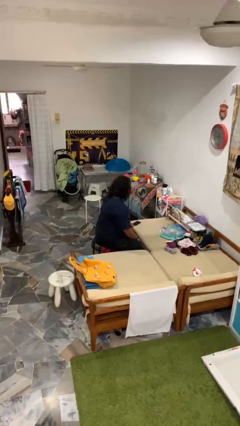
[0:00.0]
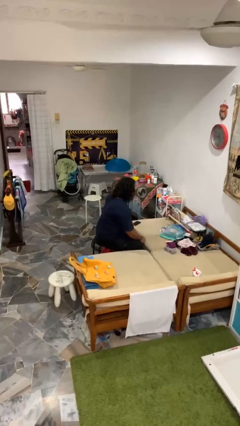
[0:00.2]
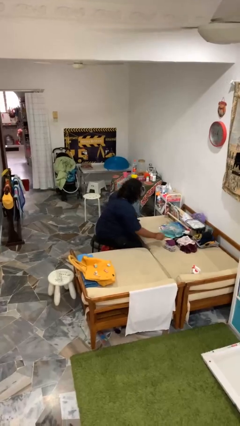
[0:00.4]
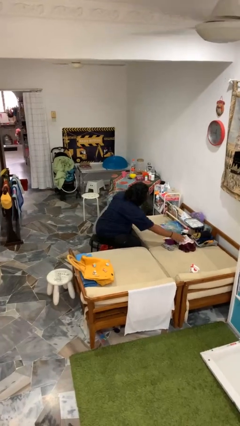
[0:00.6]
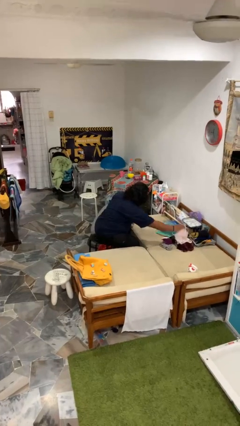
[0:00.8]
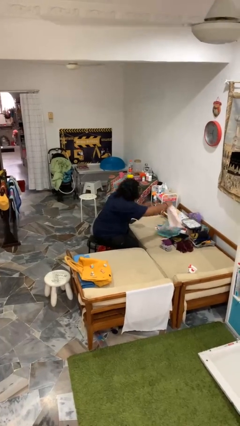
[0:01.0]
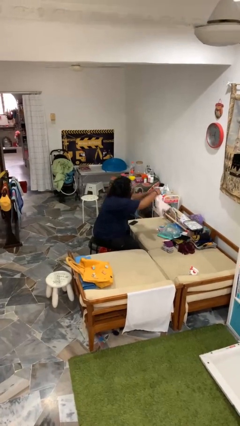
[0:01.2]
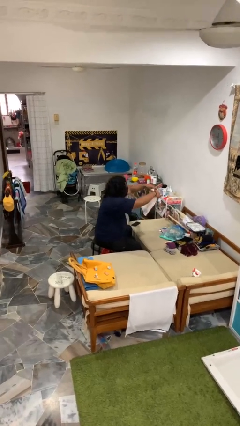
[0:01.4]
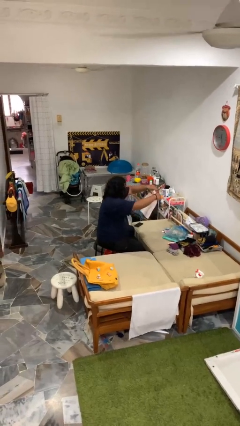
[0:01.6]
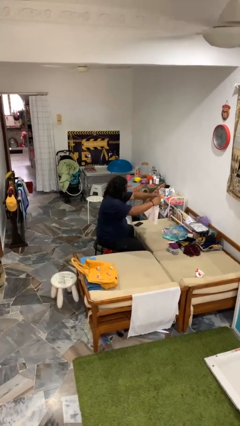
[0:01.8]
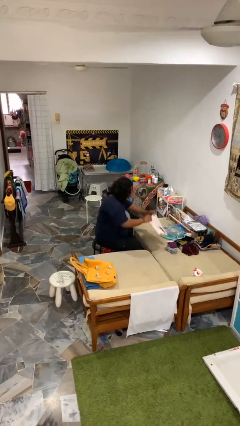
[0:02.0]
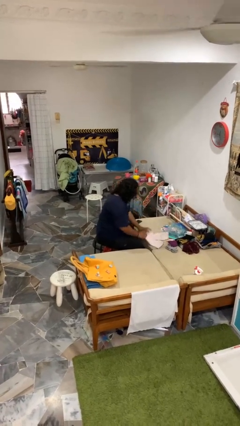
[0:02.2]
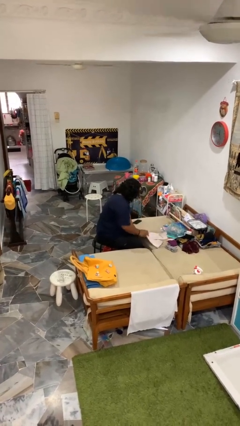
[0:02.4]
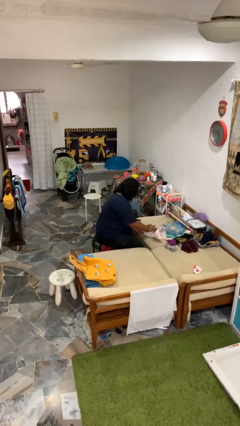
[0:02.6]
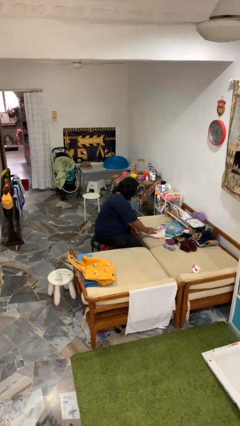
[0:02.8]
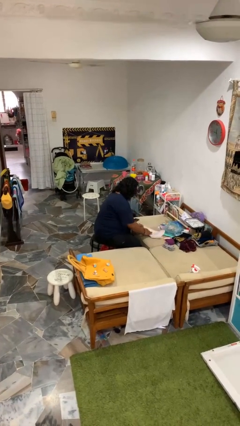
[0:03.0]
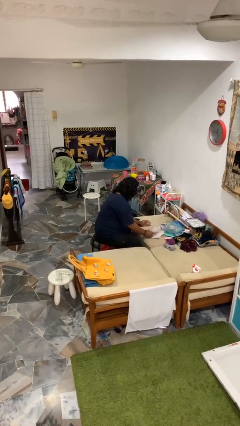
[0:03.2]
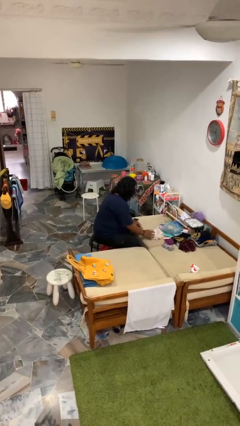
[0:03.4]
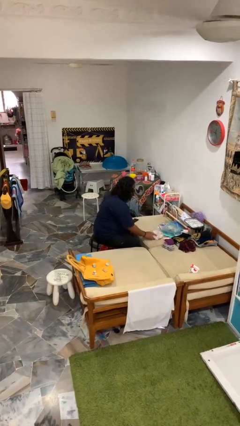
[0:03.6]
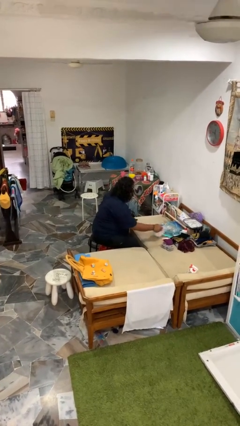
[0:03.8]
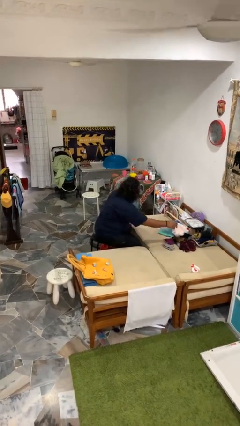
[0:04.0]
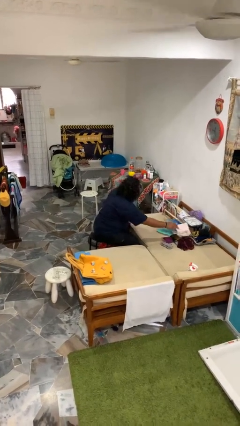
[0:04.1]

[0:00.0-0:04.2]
person folds pants

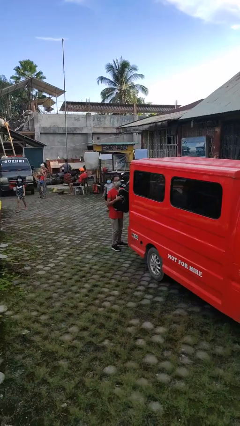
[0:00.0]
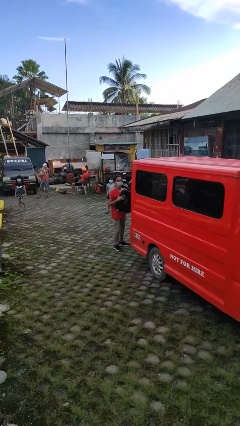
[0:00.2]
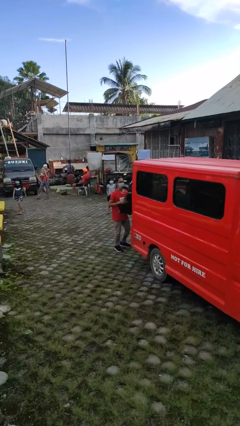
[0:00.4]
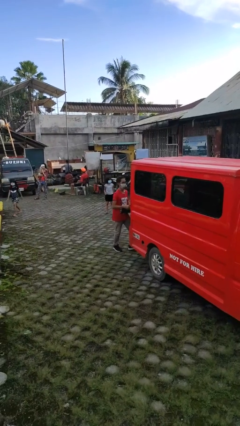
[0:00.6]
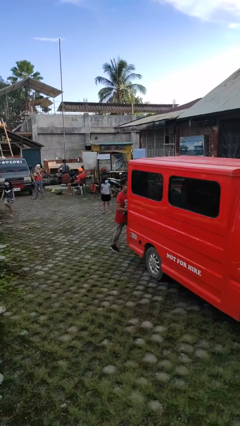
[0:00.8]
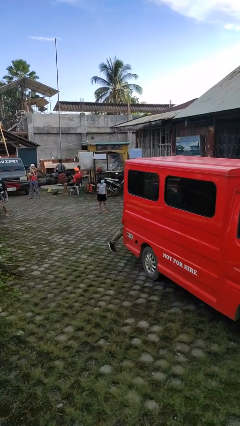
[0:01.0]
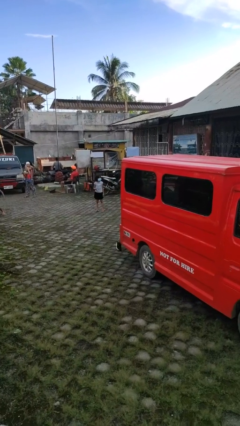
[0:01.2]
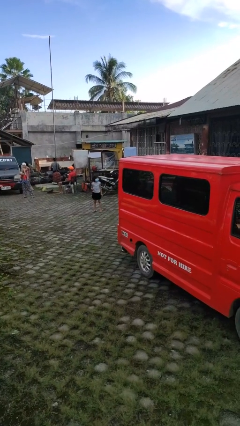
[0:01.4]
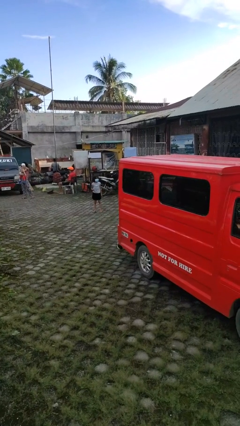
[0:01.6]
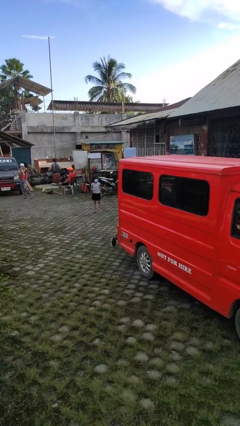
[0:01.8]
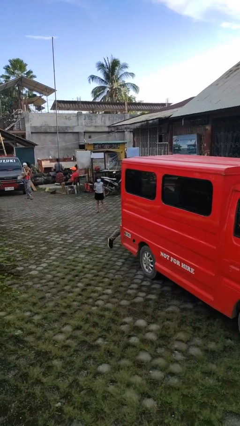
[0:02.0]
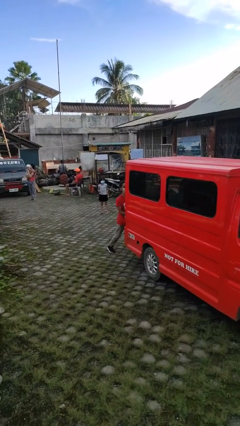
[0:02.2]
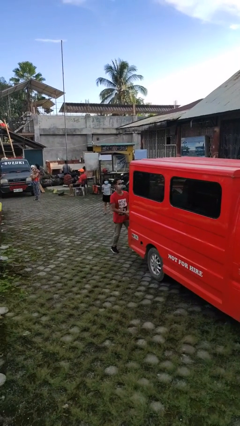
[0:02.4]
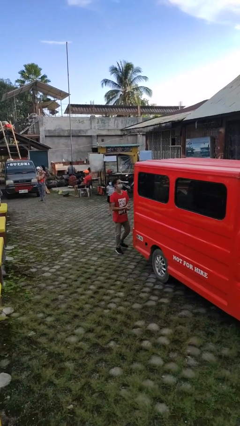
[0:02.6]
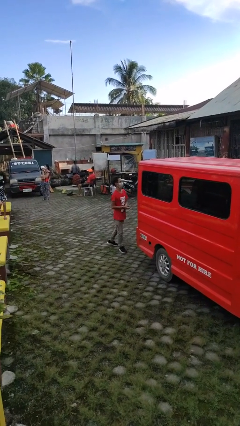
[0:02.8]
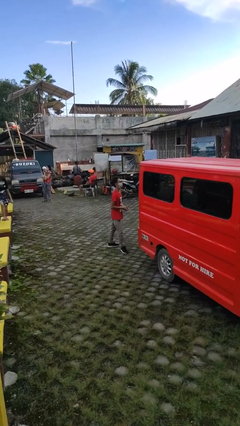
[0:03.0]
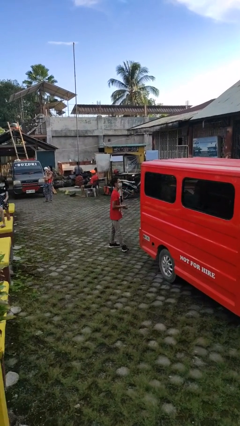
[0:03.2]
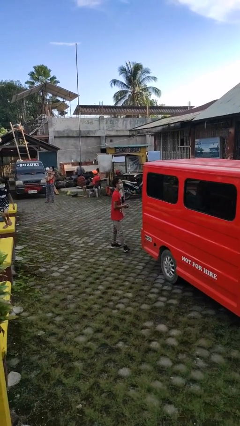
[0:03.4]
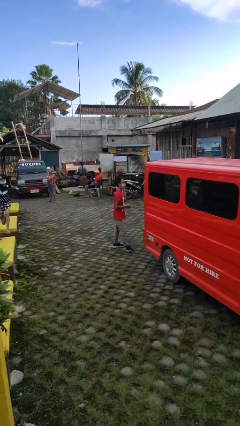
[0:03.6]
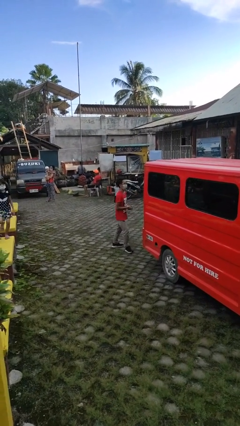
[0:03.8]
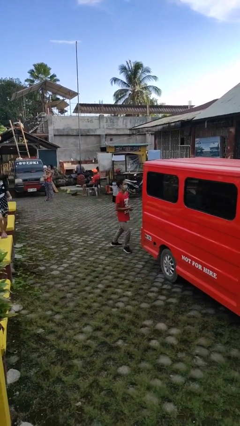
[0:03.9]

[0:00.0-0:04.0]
person loads car

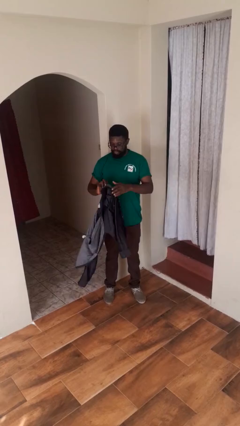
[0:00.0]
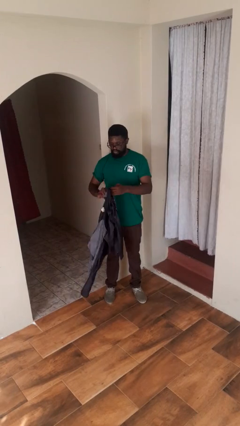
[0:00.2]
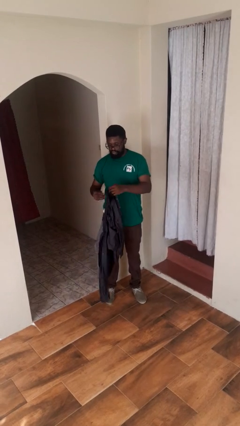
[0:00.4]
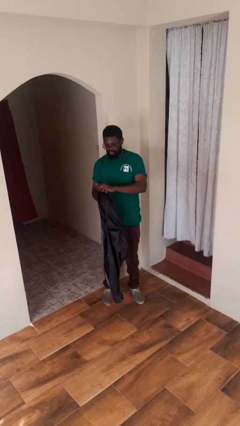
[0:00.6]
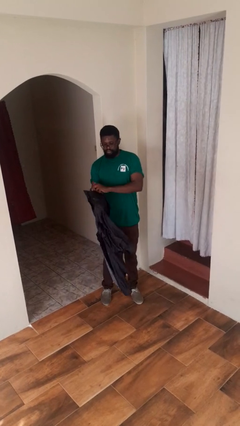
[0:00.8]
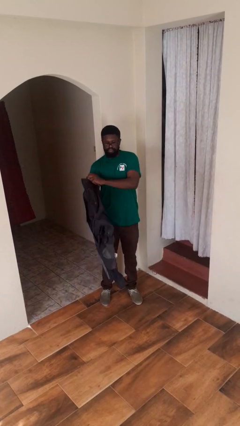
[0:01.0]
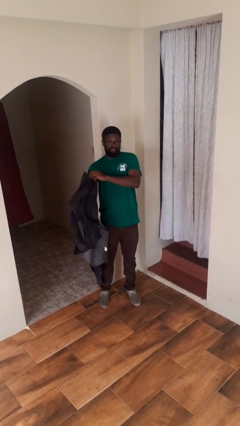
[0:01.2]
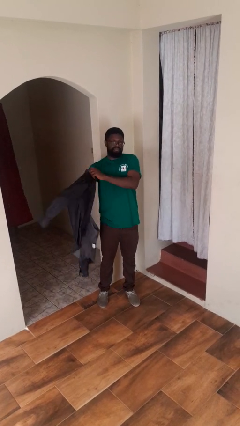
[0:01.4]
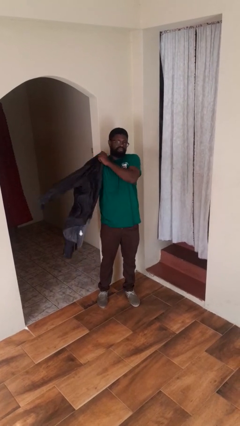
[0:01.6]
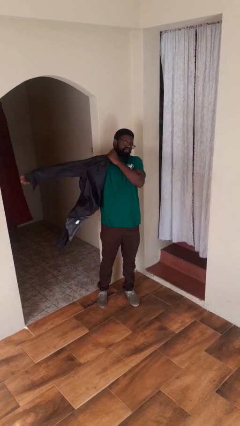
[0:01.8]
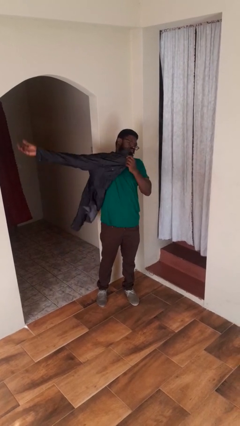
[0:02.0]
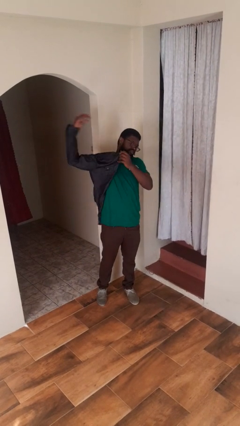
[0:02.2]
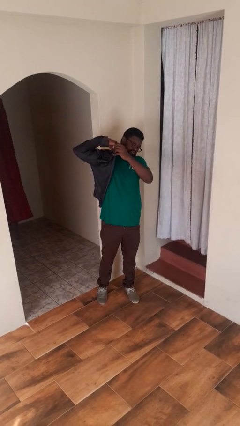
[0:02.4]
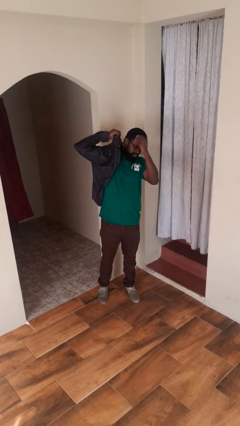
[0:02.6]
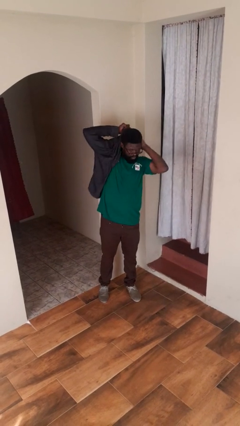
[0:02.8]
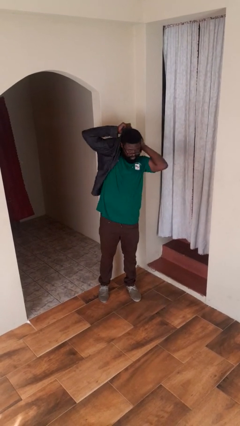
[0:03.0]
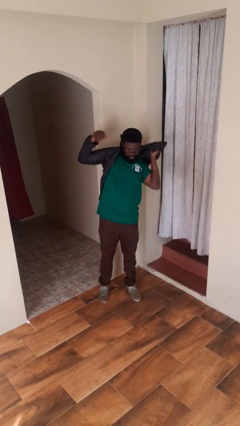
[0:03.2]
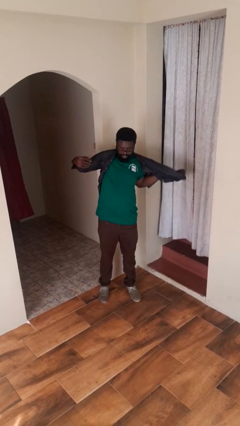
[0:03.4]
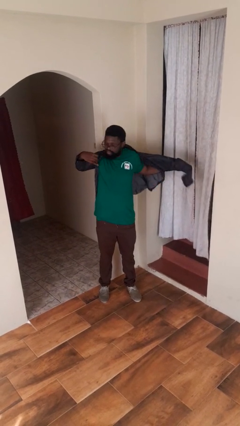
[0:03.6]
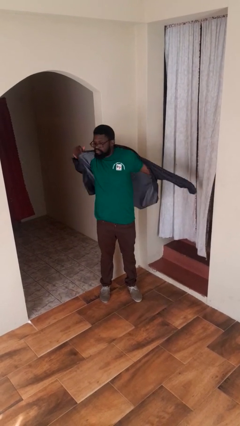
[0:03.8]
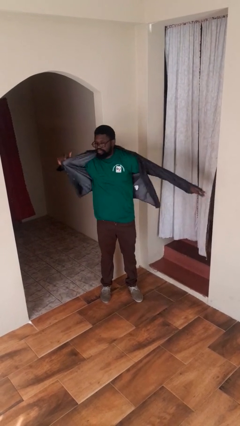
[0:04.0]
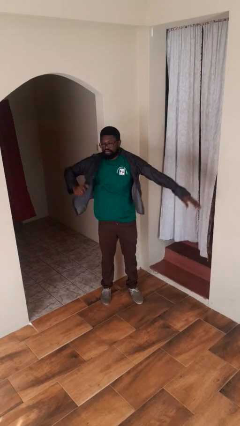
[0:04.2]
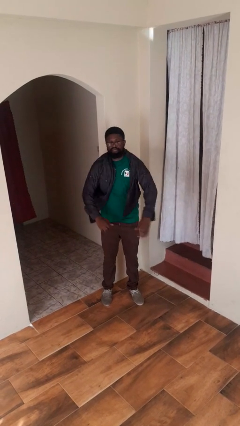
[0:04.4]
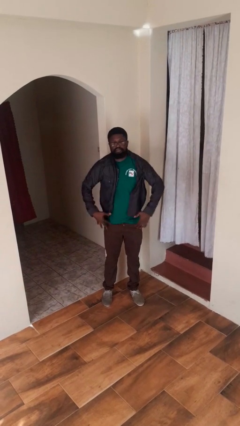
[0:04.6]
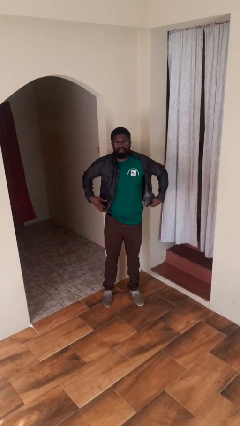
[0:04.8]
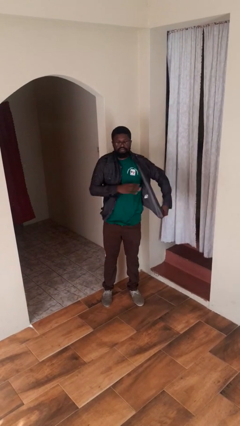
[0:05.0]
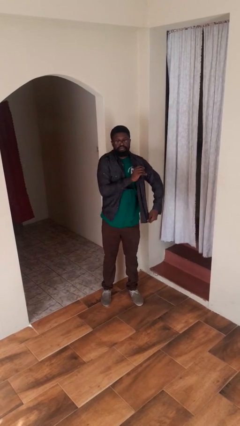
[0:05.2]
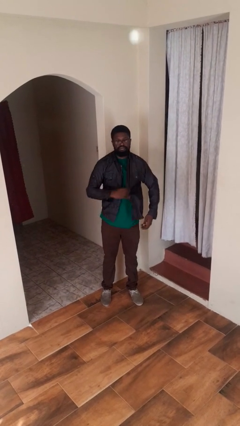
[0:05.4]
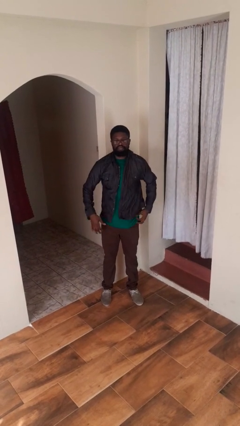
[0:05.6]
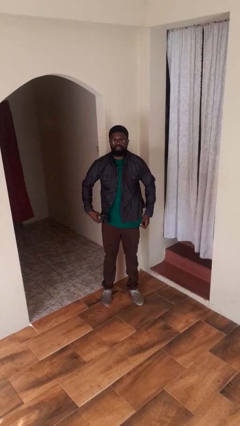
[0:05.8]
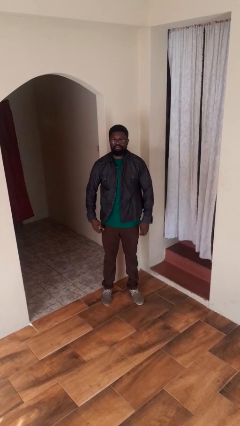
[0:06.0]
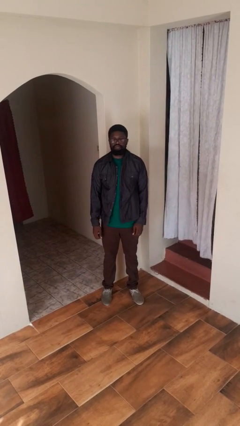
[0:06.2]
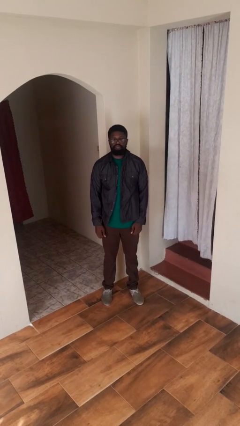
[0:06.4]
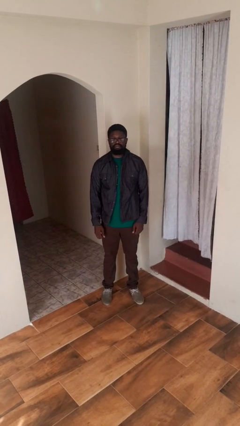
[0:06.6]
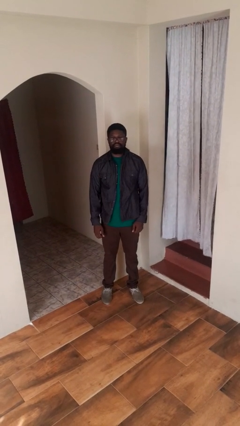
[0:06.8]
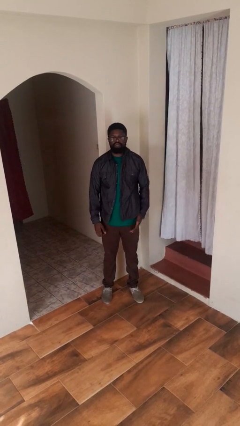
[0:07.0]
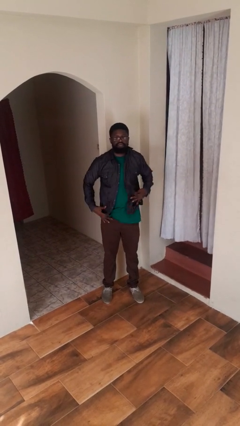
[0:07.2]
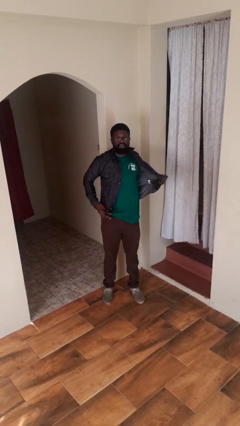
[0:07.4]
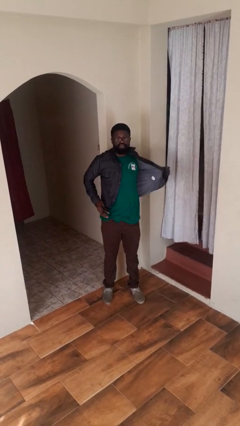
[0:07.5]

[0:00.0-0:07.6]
person puts on shirt

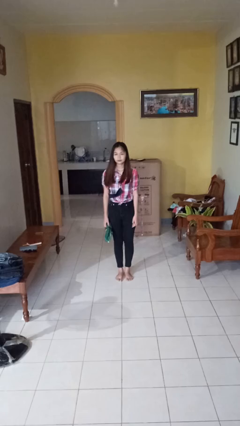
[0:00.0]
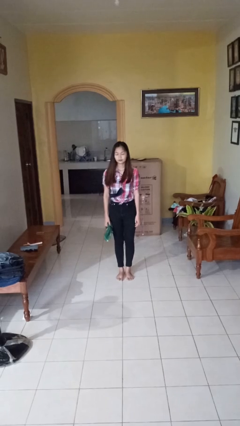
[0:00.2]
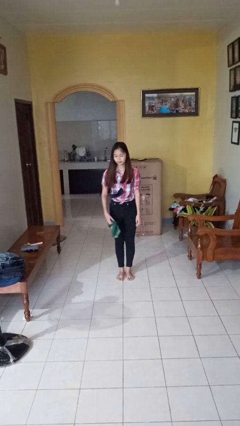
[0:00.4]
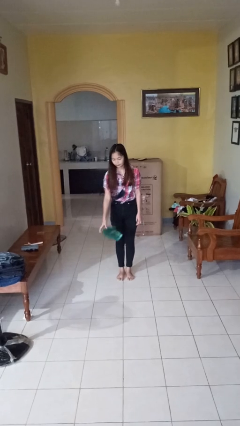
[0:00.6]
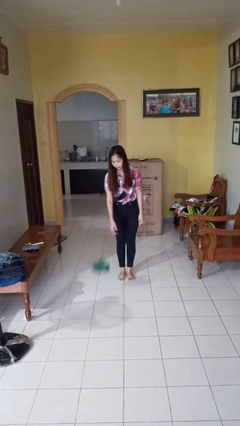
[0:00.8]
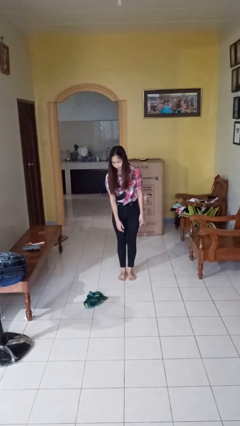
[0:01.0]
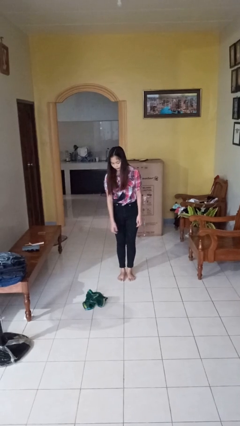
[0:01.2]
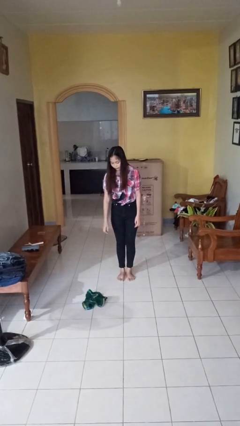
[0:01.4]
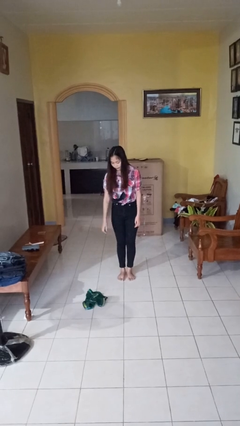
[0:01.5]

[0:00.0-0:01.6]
person throws object into air

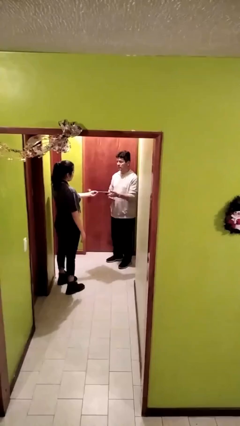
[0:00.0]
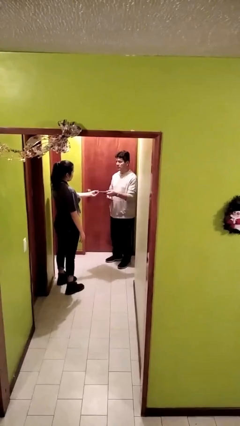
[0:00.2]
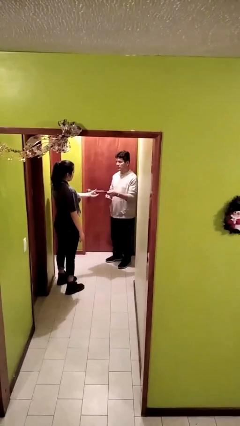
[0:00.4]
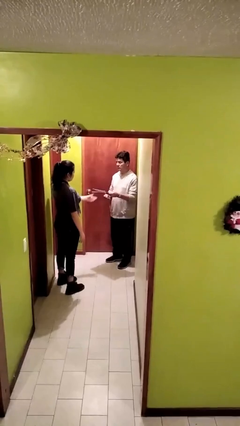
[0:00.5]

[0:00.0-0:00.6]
person transfers object to person
